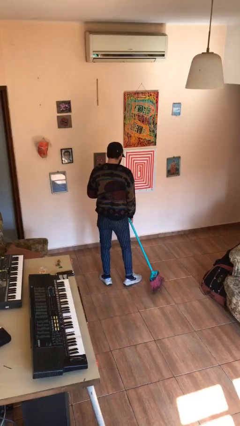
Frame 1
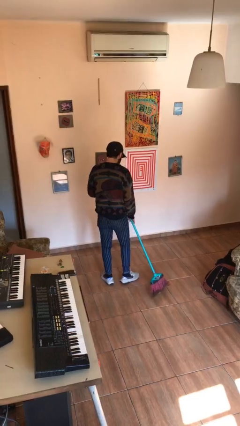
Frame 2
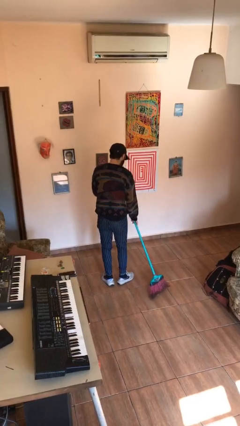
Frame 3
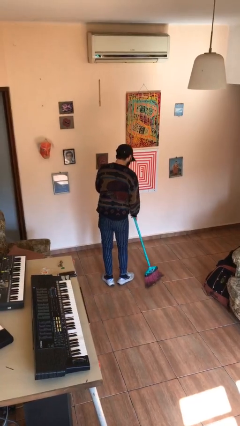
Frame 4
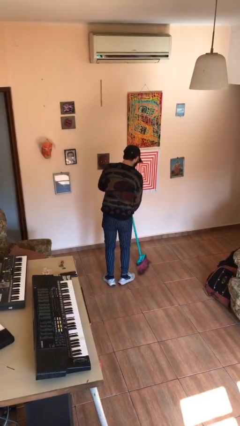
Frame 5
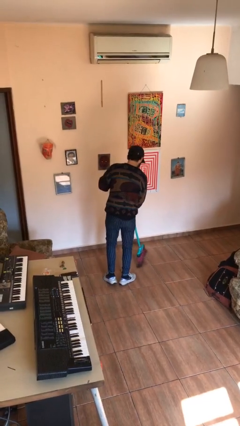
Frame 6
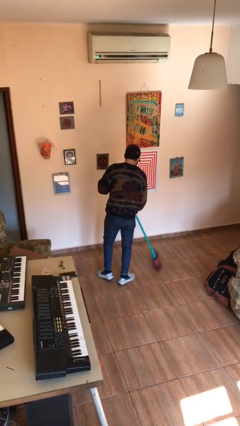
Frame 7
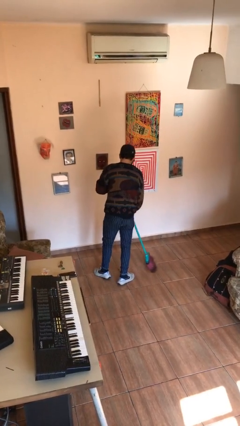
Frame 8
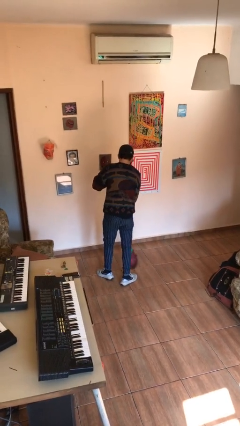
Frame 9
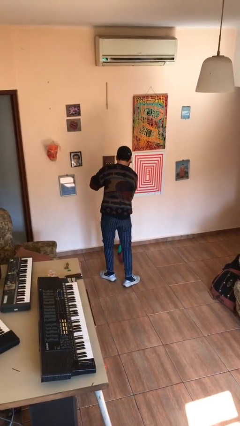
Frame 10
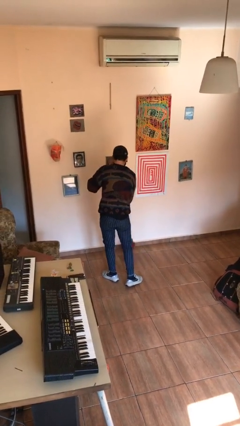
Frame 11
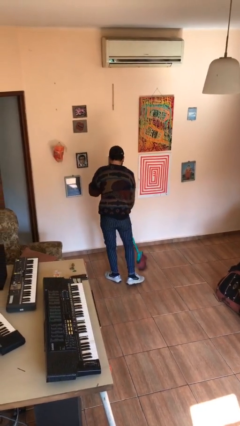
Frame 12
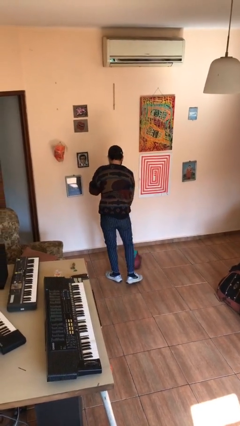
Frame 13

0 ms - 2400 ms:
person sweeps floor

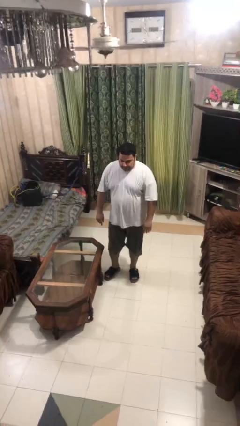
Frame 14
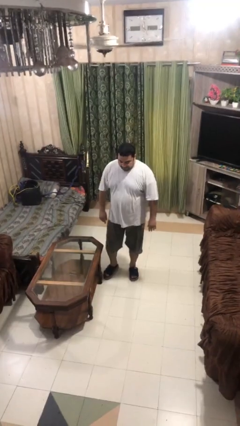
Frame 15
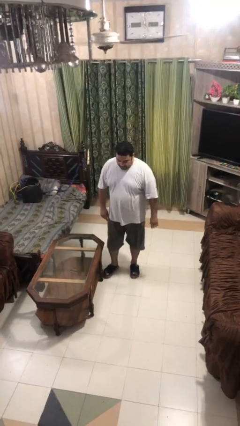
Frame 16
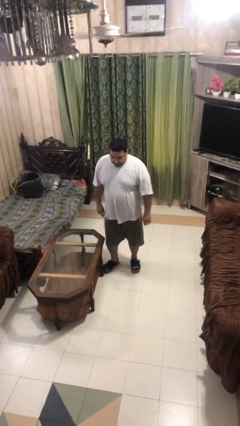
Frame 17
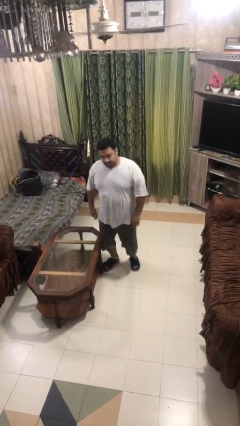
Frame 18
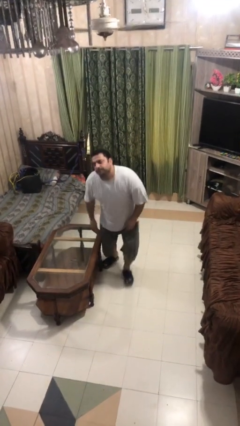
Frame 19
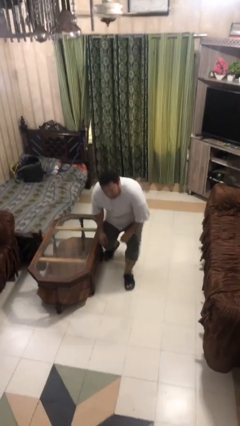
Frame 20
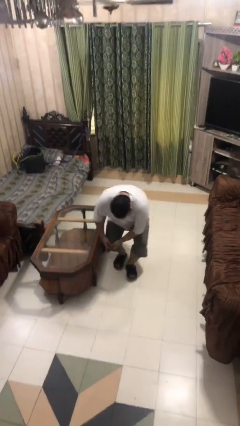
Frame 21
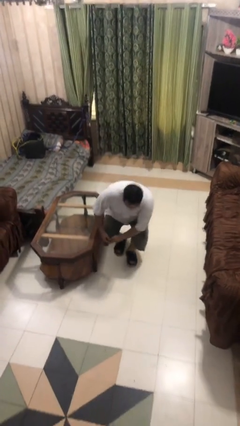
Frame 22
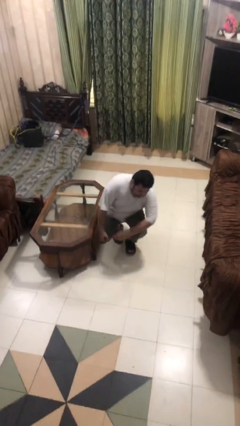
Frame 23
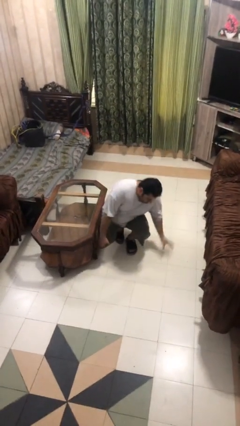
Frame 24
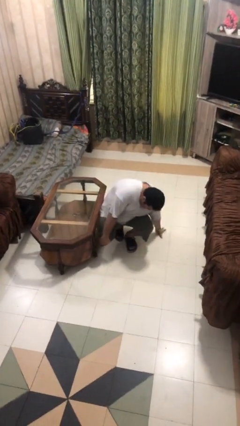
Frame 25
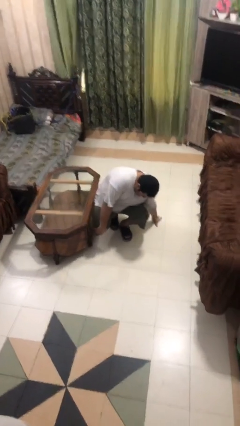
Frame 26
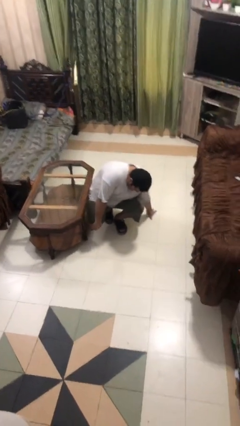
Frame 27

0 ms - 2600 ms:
person trips on object on floor

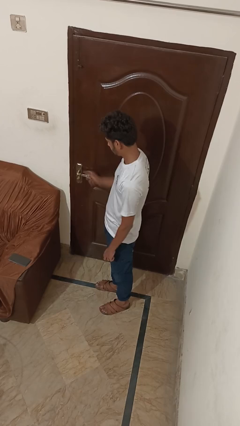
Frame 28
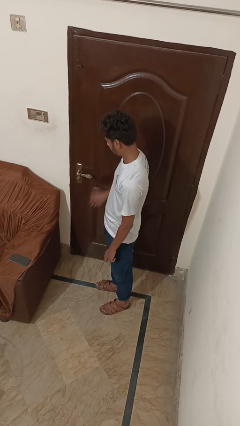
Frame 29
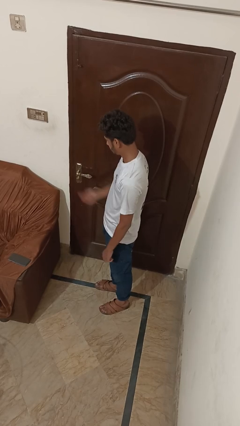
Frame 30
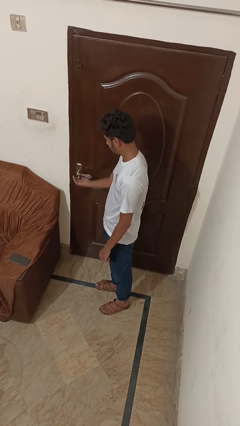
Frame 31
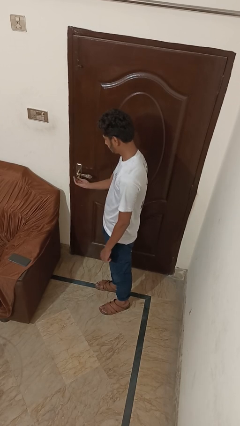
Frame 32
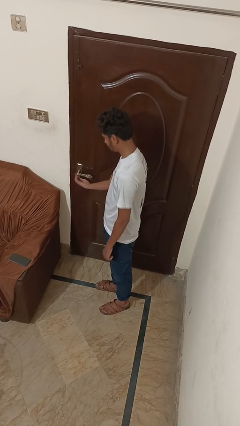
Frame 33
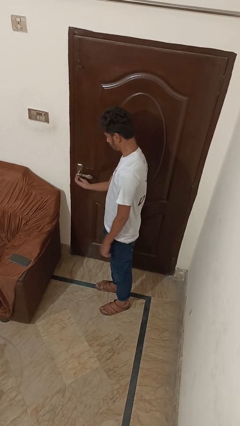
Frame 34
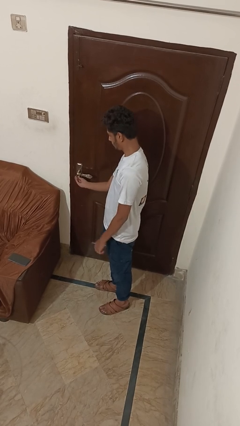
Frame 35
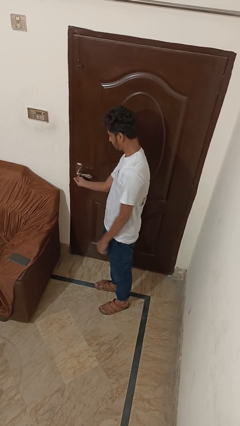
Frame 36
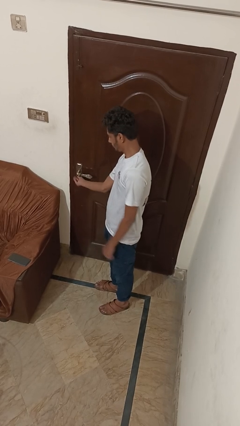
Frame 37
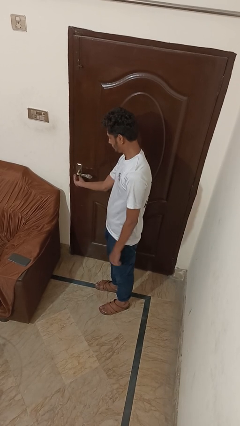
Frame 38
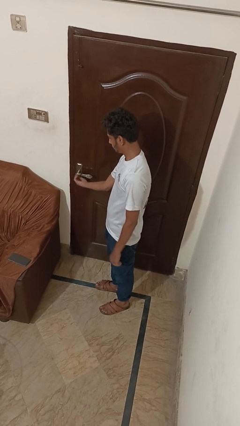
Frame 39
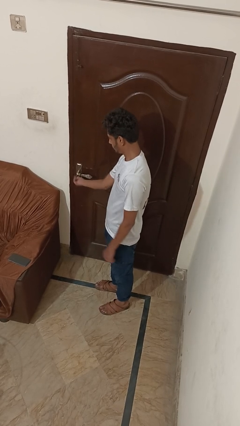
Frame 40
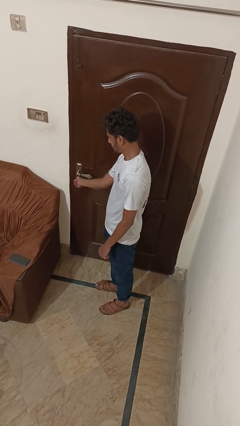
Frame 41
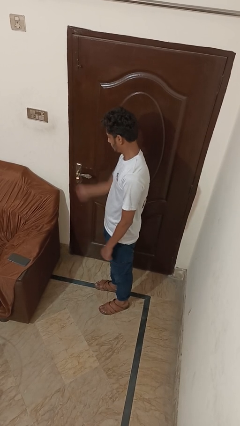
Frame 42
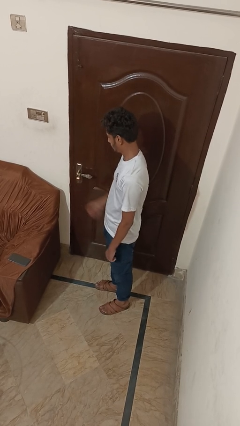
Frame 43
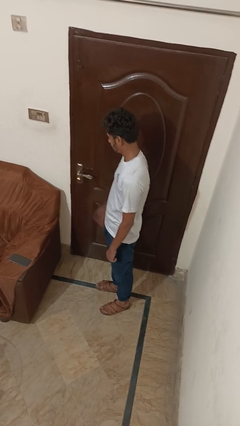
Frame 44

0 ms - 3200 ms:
person locks door with keys

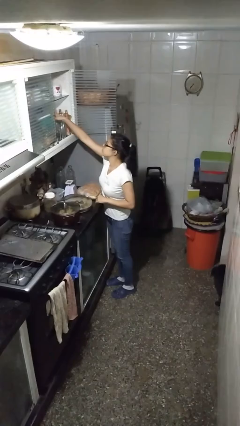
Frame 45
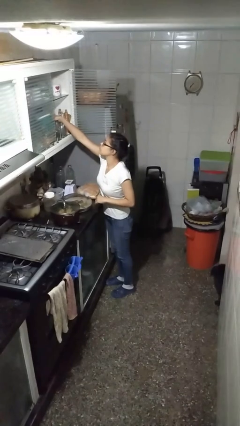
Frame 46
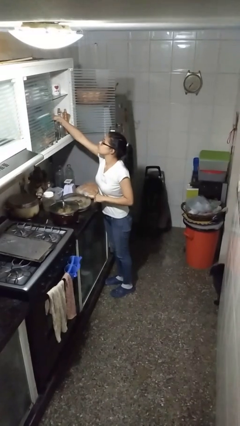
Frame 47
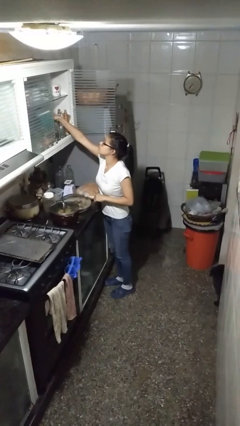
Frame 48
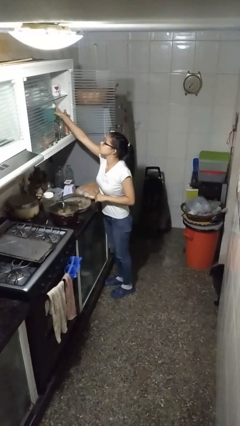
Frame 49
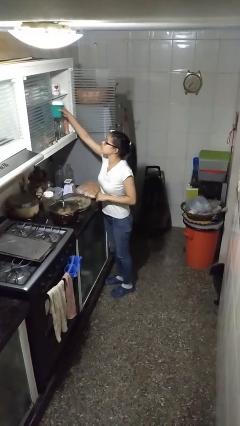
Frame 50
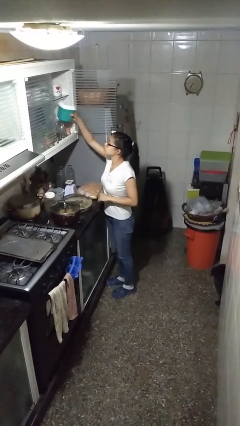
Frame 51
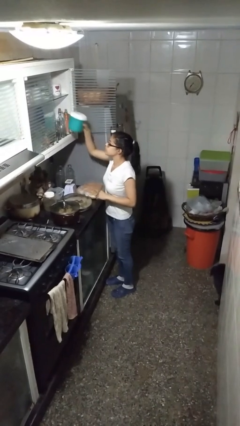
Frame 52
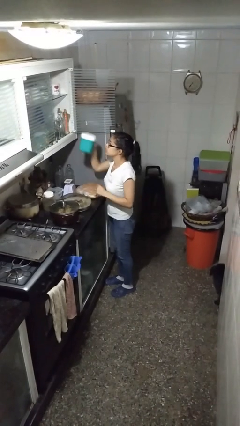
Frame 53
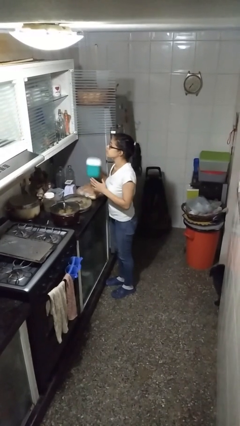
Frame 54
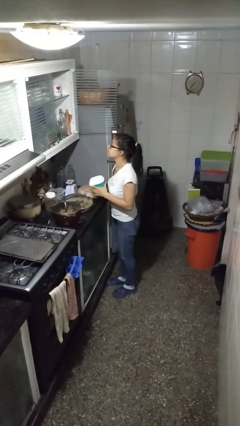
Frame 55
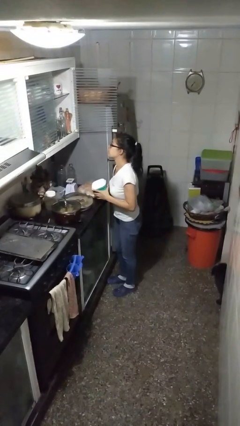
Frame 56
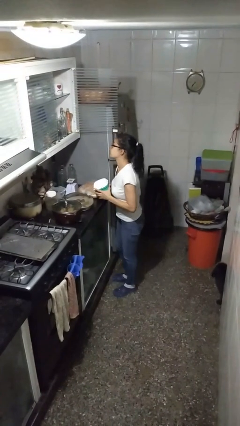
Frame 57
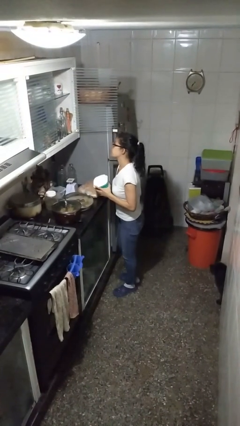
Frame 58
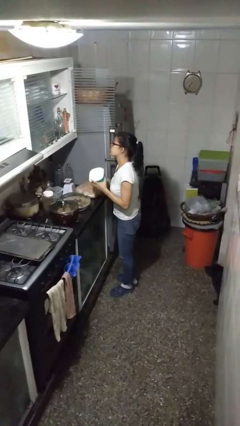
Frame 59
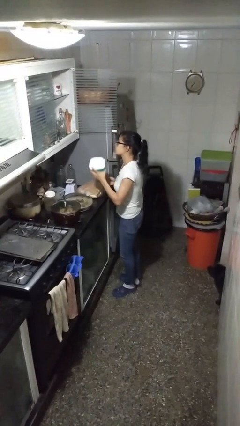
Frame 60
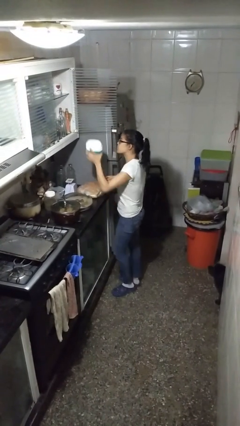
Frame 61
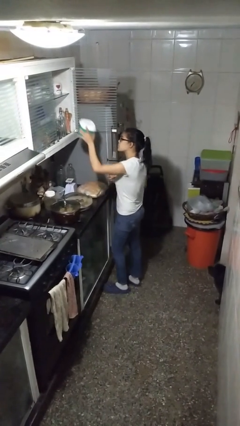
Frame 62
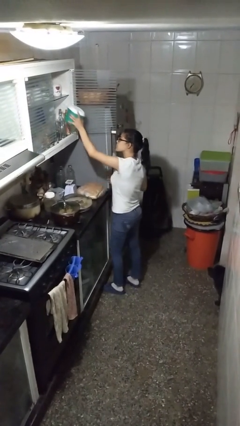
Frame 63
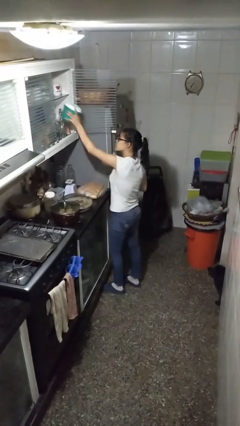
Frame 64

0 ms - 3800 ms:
person picks up object from cabinet

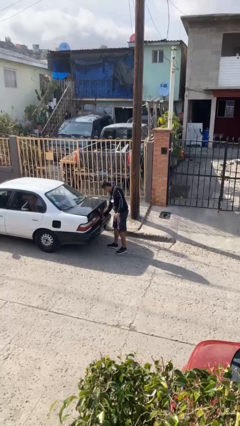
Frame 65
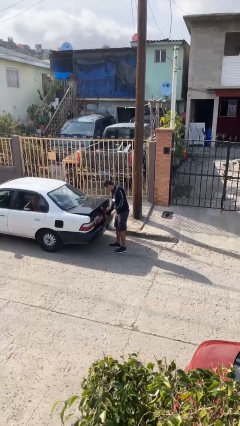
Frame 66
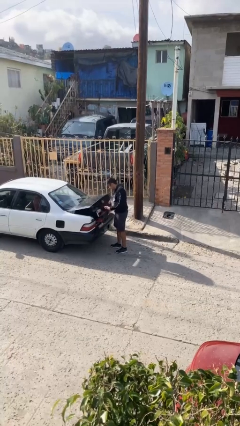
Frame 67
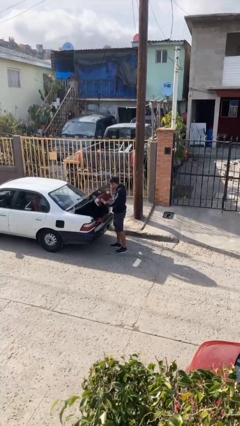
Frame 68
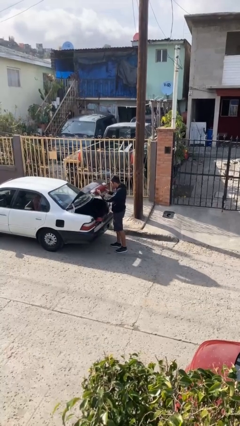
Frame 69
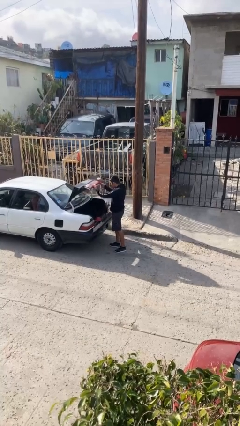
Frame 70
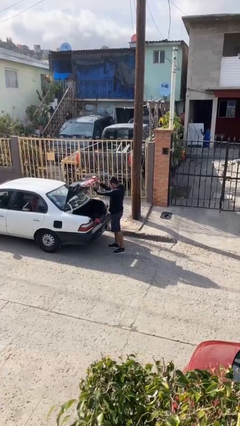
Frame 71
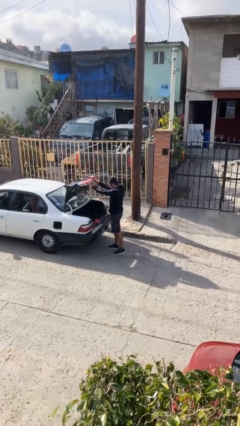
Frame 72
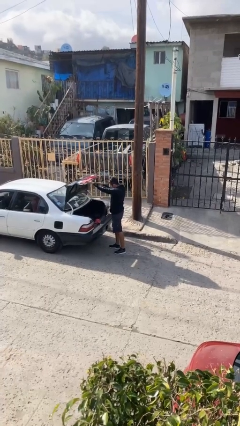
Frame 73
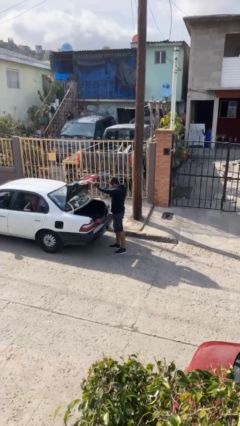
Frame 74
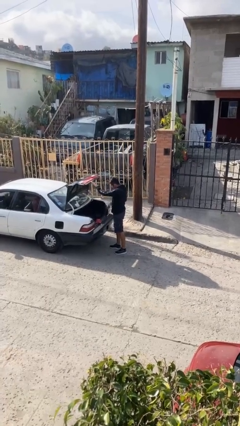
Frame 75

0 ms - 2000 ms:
person opens car trunk

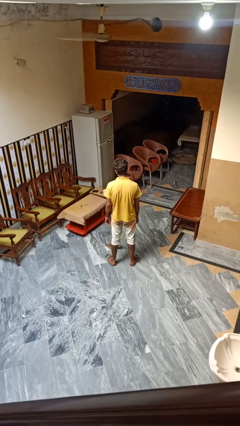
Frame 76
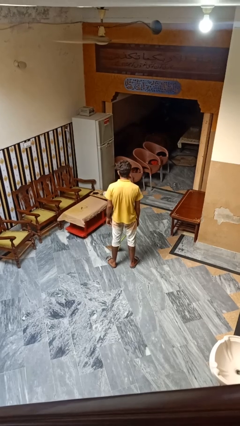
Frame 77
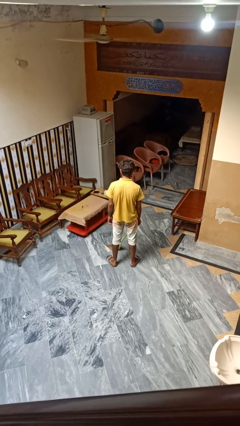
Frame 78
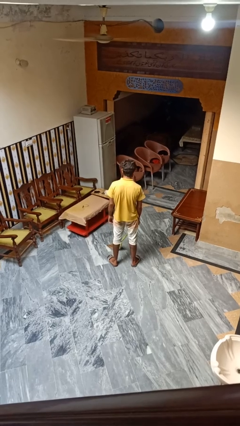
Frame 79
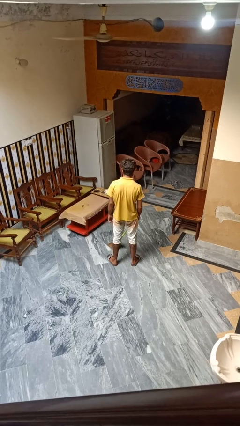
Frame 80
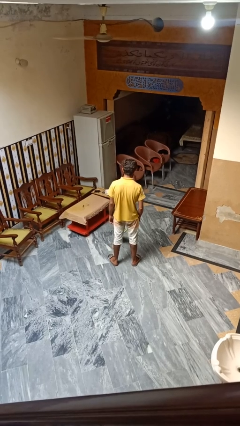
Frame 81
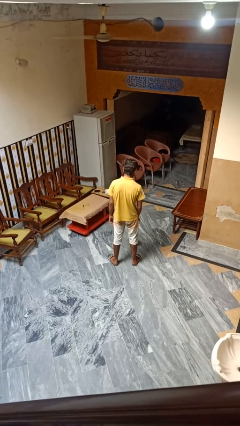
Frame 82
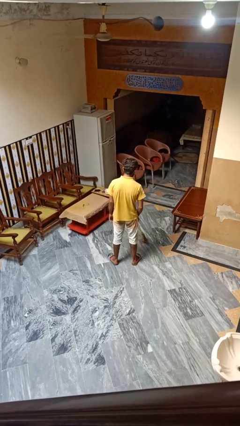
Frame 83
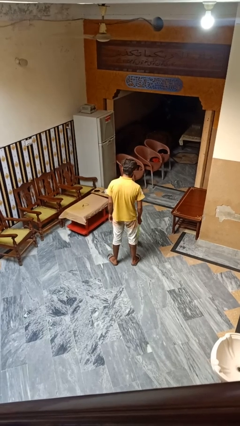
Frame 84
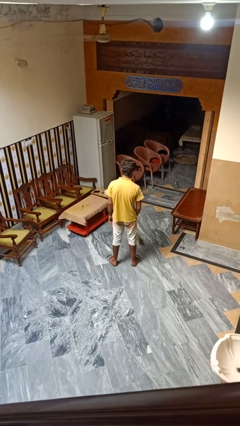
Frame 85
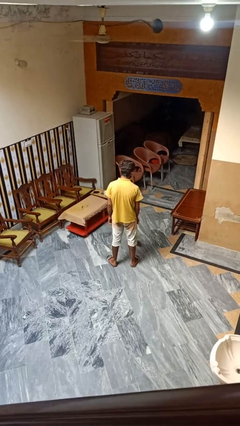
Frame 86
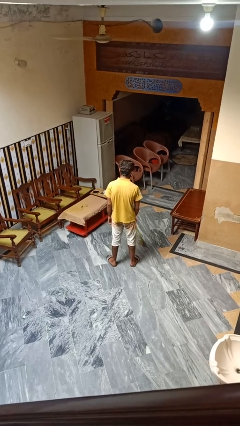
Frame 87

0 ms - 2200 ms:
person mops

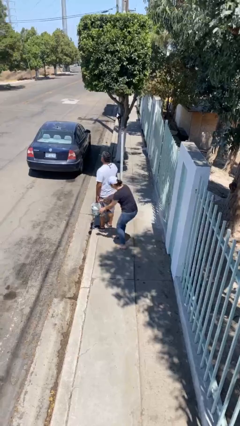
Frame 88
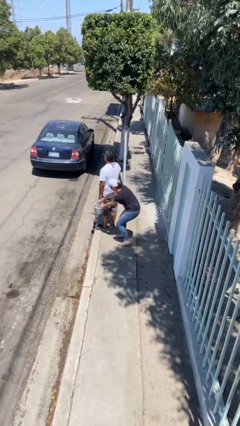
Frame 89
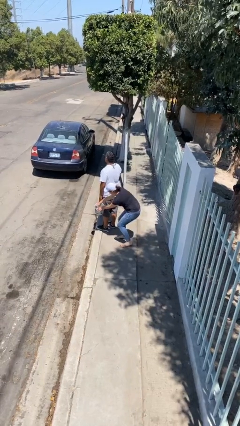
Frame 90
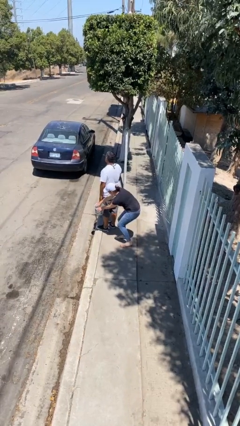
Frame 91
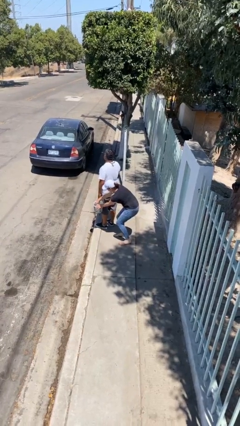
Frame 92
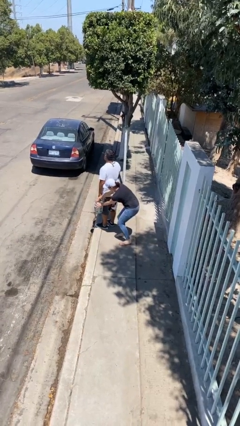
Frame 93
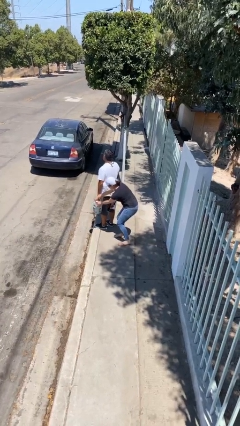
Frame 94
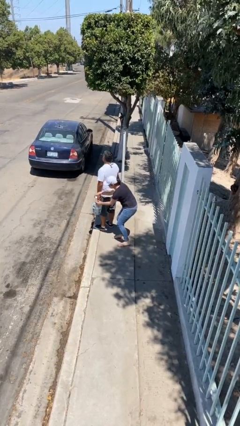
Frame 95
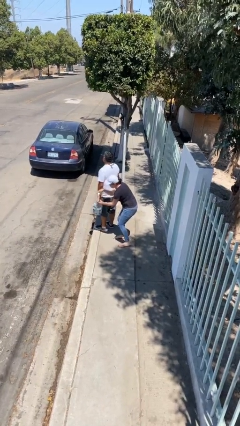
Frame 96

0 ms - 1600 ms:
person steals object from person
